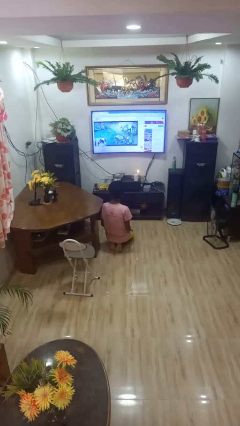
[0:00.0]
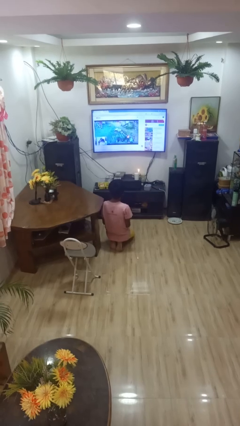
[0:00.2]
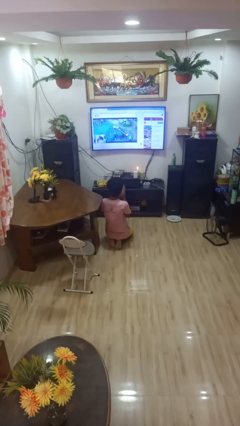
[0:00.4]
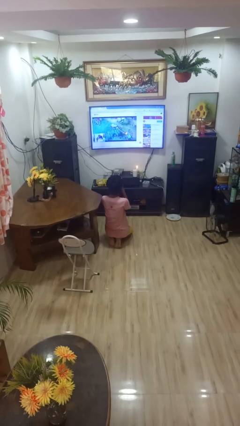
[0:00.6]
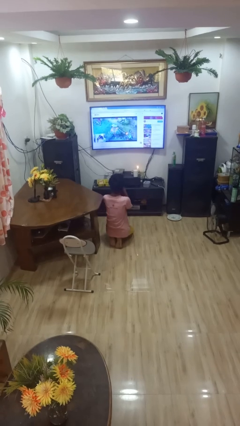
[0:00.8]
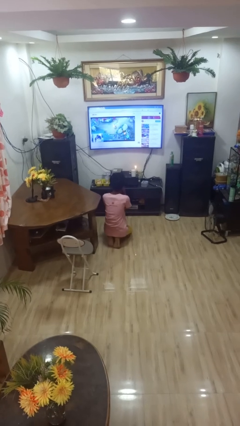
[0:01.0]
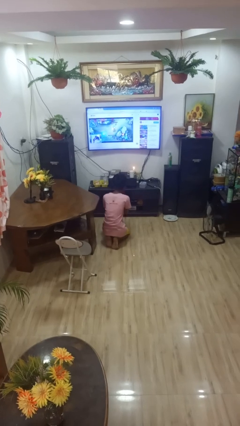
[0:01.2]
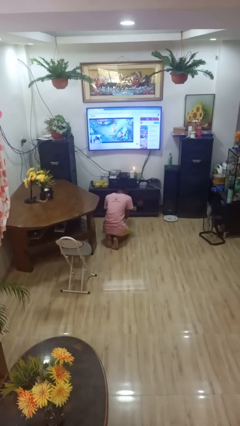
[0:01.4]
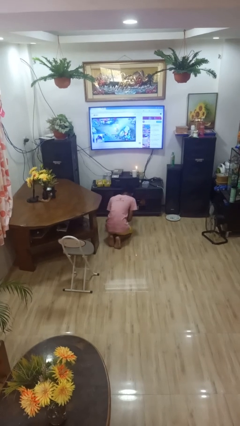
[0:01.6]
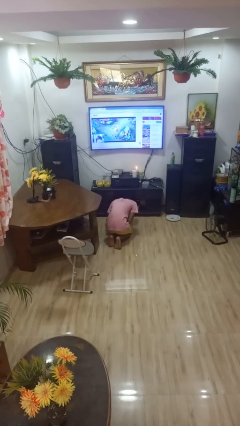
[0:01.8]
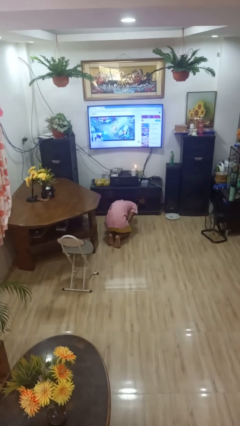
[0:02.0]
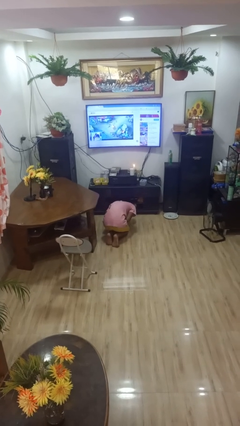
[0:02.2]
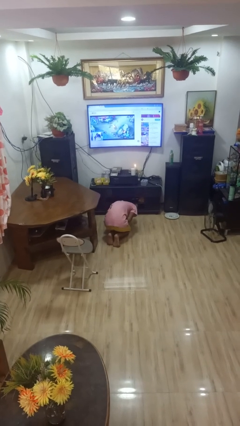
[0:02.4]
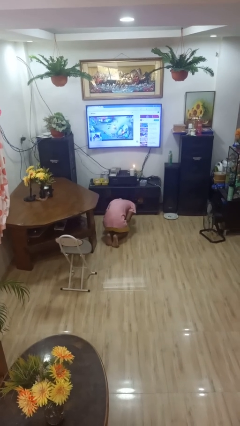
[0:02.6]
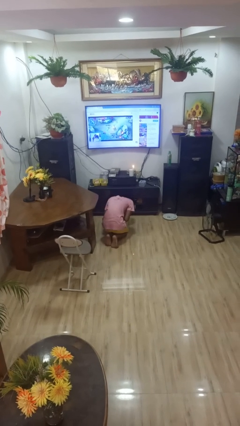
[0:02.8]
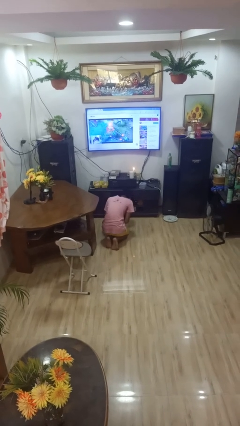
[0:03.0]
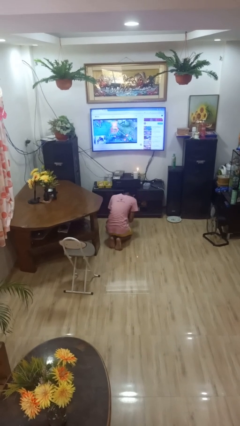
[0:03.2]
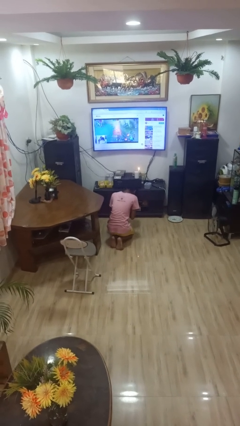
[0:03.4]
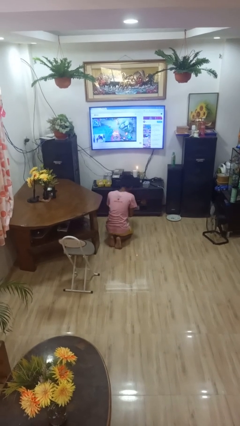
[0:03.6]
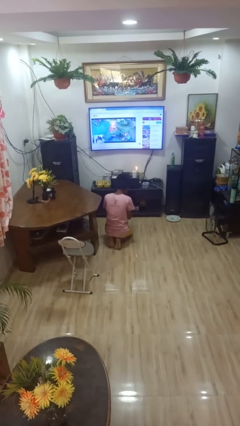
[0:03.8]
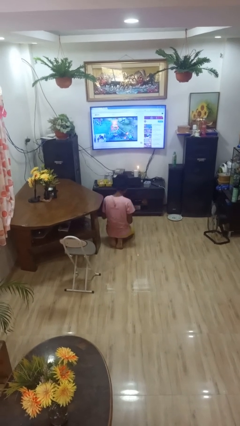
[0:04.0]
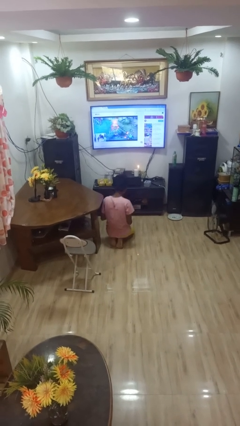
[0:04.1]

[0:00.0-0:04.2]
person prays

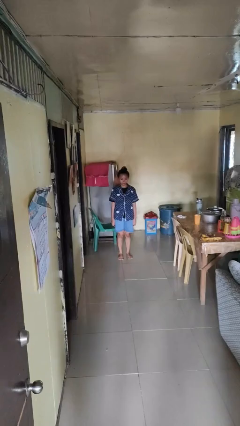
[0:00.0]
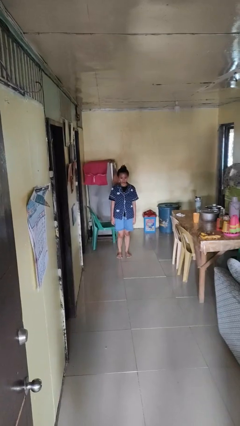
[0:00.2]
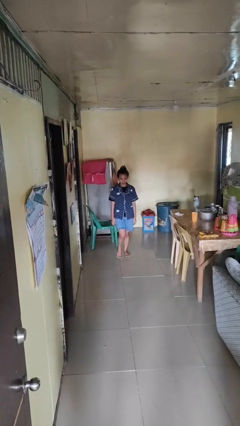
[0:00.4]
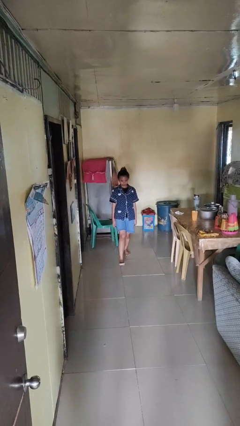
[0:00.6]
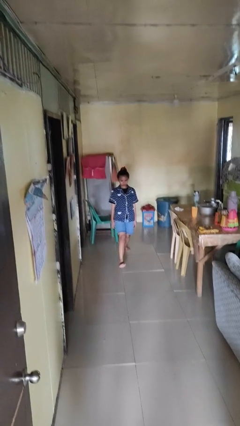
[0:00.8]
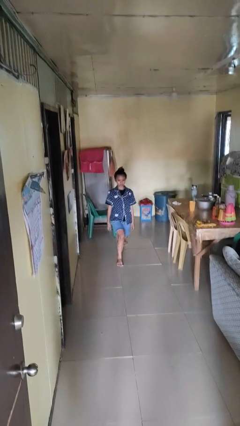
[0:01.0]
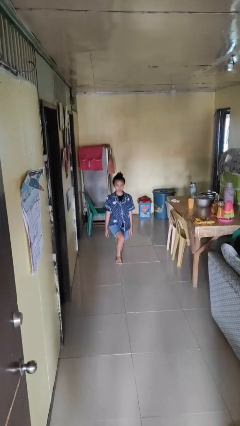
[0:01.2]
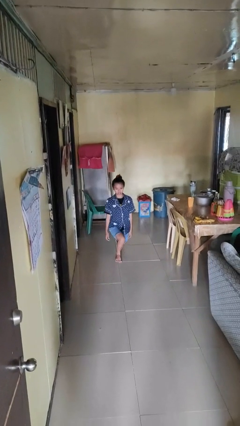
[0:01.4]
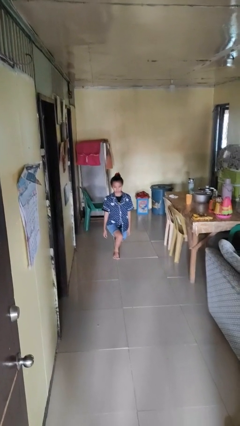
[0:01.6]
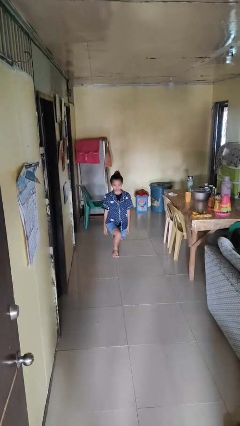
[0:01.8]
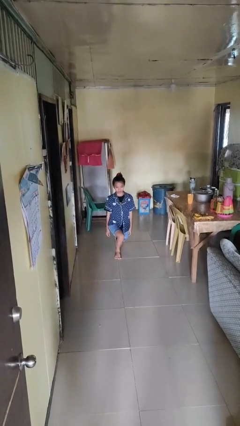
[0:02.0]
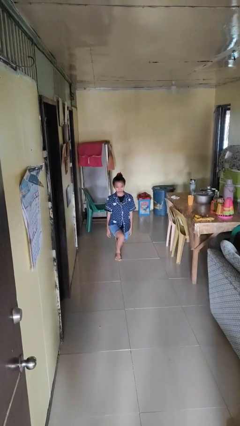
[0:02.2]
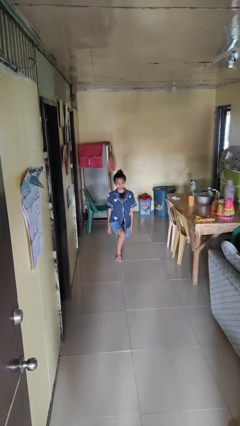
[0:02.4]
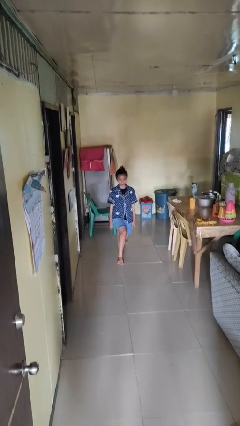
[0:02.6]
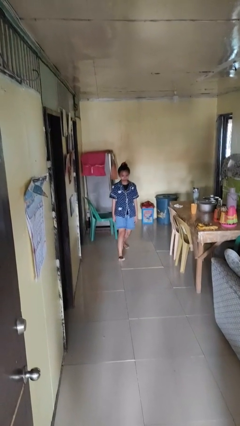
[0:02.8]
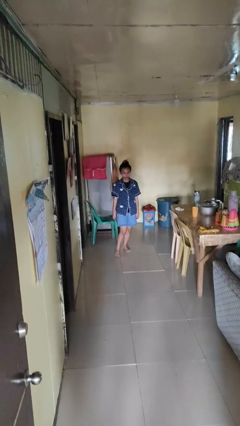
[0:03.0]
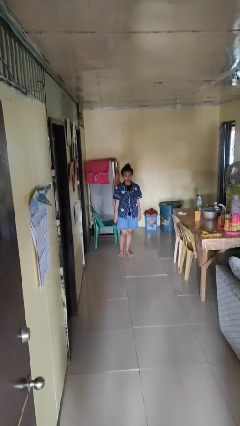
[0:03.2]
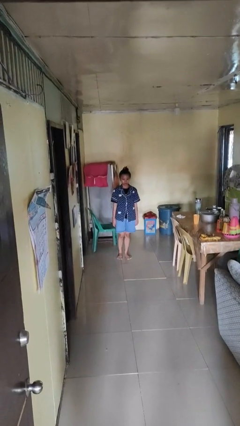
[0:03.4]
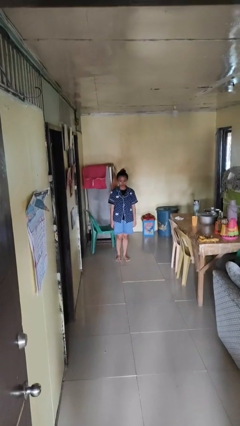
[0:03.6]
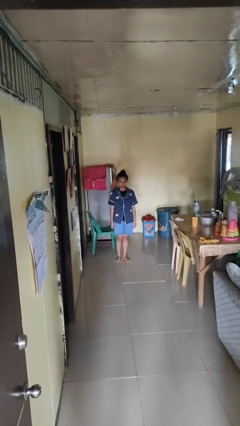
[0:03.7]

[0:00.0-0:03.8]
person exercises with lunges

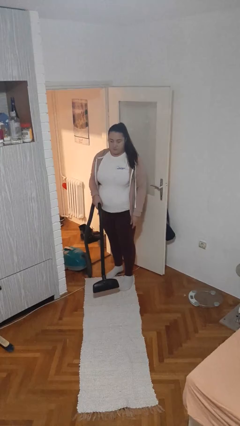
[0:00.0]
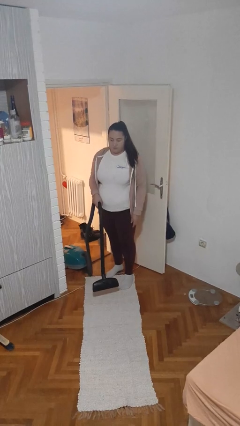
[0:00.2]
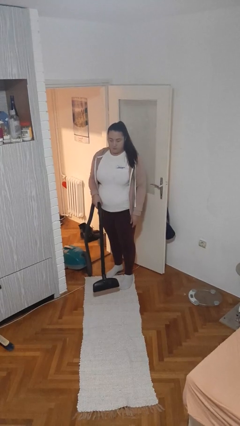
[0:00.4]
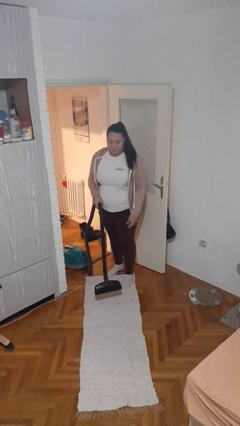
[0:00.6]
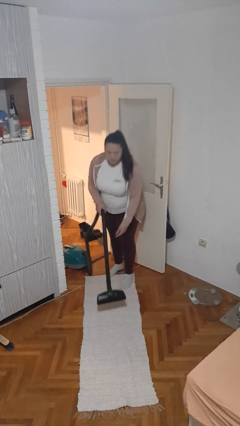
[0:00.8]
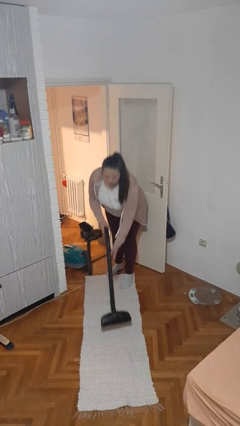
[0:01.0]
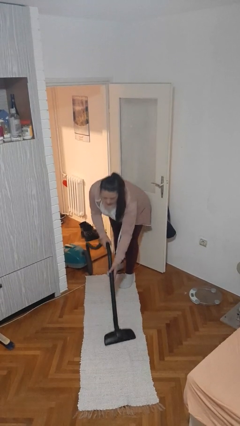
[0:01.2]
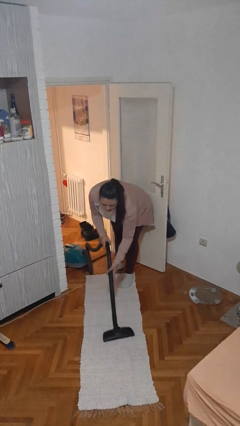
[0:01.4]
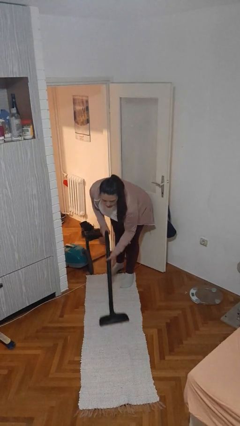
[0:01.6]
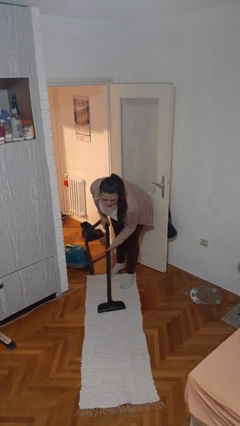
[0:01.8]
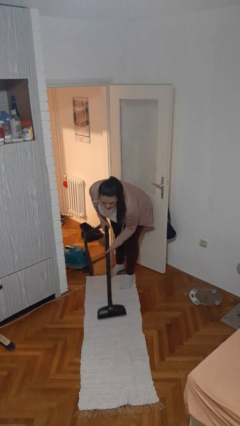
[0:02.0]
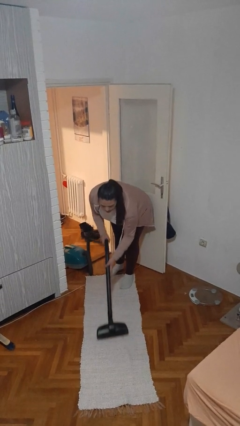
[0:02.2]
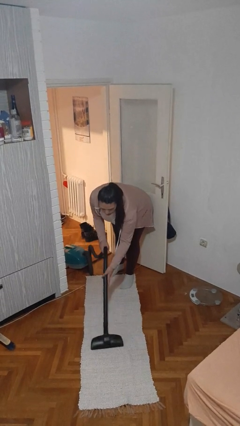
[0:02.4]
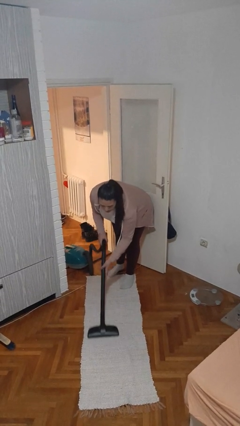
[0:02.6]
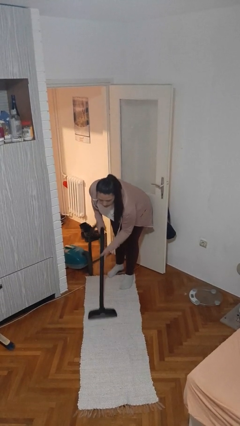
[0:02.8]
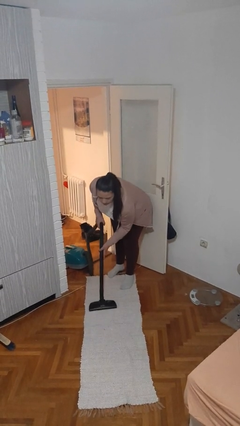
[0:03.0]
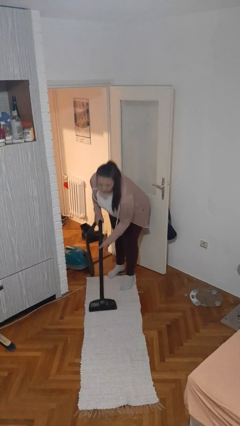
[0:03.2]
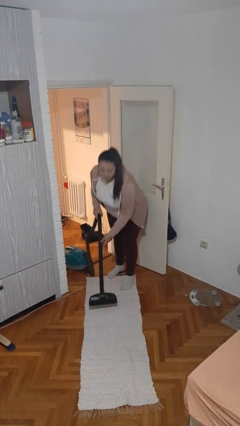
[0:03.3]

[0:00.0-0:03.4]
person vacuums carpet

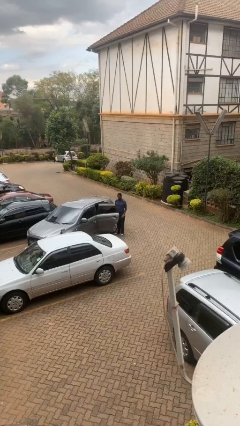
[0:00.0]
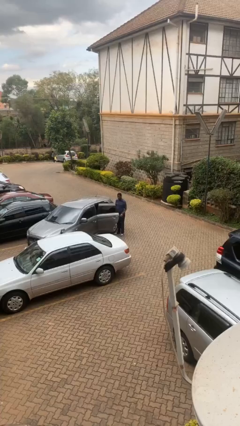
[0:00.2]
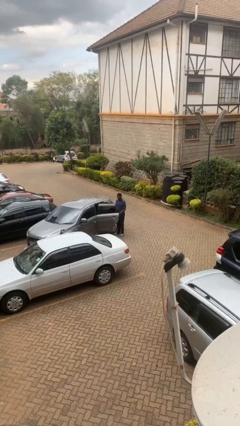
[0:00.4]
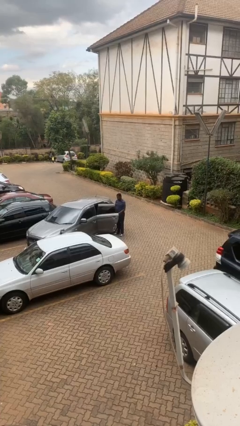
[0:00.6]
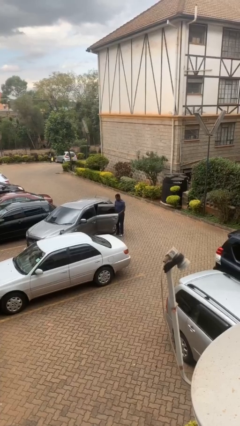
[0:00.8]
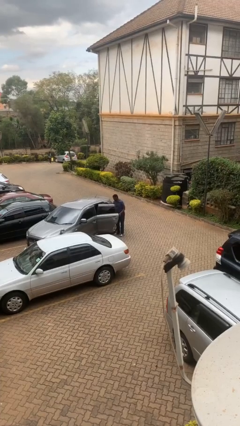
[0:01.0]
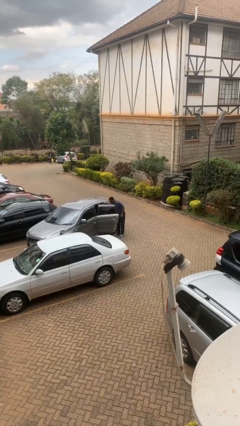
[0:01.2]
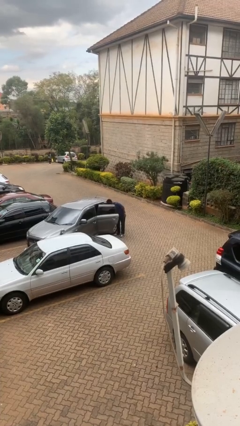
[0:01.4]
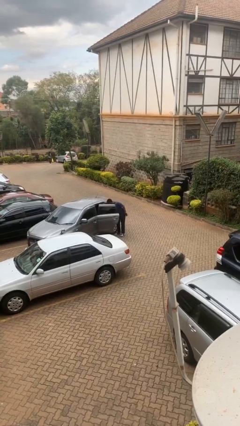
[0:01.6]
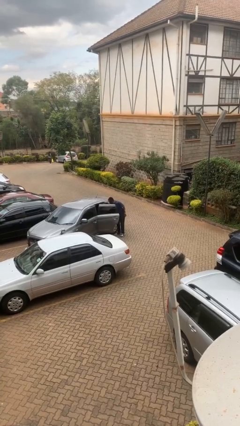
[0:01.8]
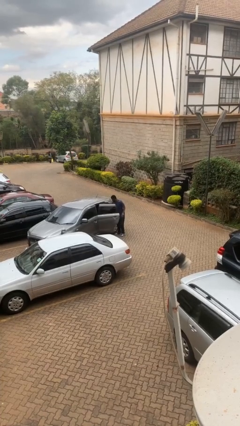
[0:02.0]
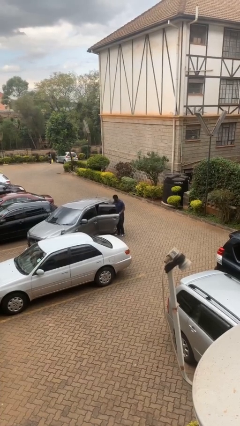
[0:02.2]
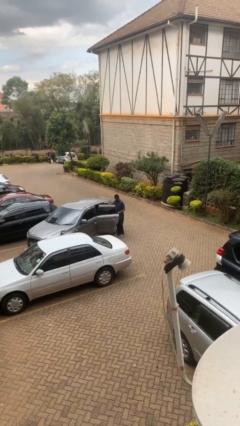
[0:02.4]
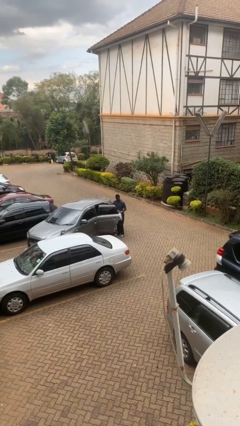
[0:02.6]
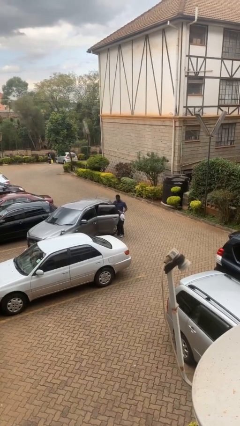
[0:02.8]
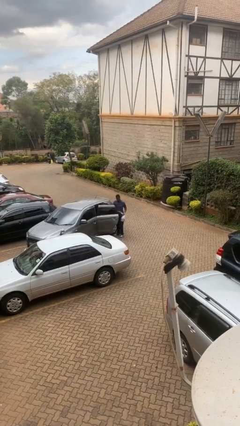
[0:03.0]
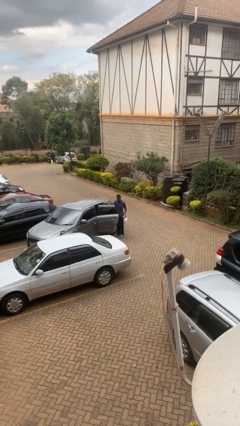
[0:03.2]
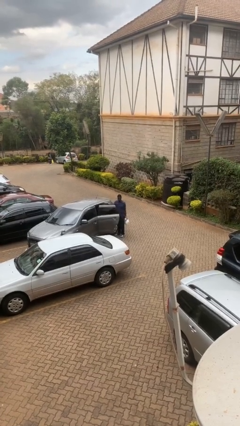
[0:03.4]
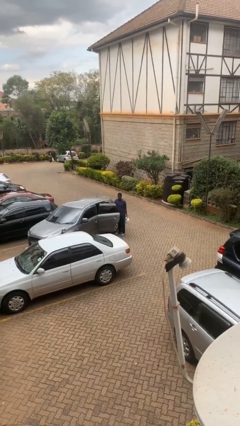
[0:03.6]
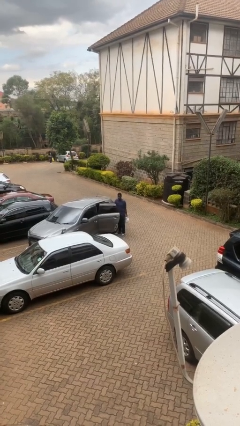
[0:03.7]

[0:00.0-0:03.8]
person unloads car

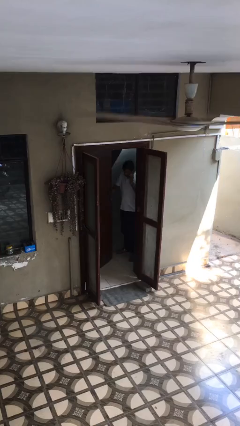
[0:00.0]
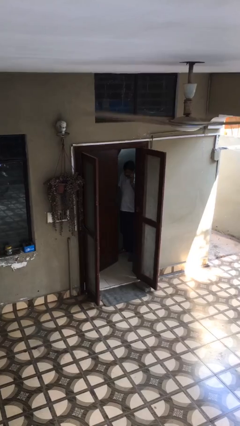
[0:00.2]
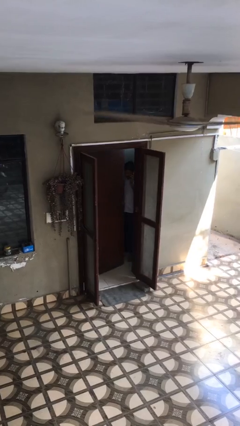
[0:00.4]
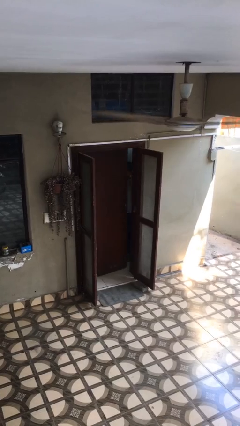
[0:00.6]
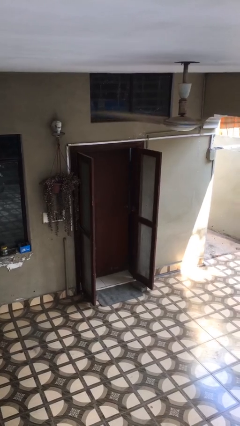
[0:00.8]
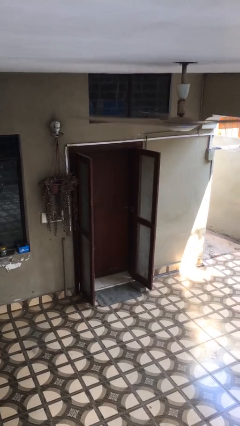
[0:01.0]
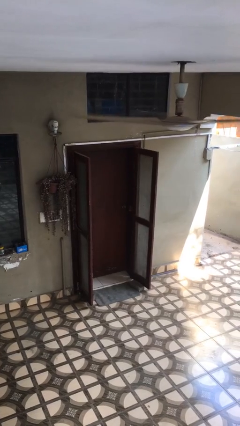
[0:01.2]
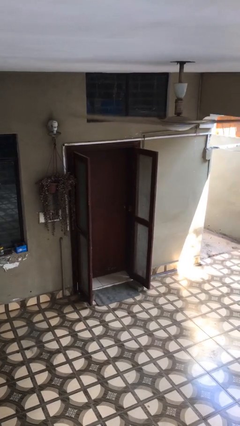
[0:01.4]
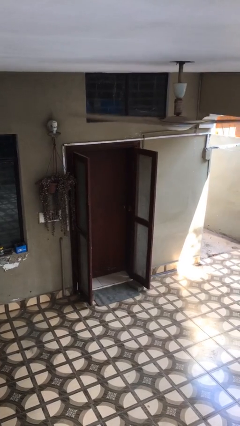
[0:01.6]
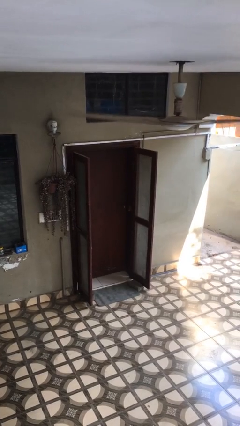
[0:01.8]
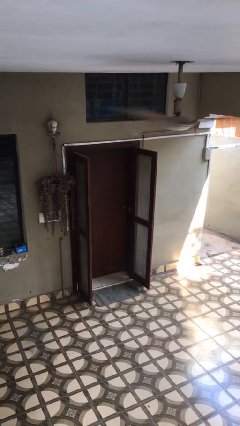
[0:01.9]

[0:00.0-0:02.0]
person closes facility door

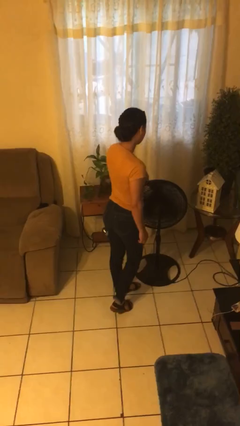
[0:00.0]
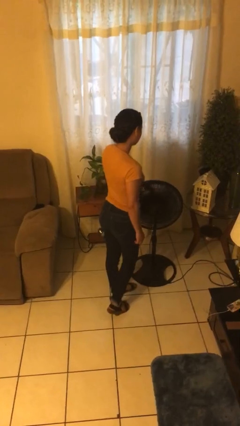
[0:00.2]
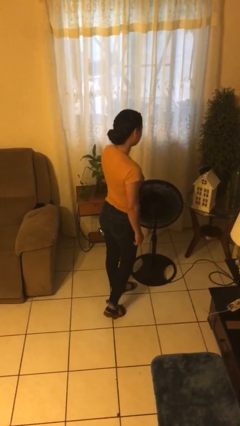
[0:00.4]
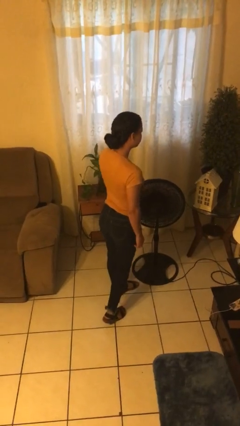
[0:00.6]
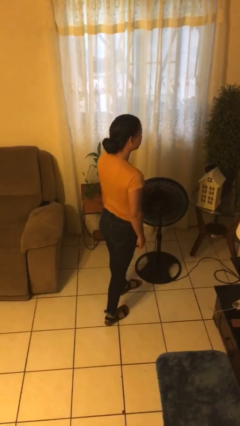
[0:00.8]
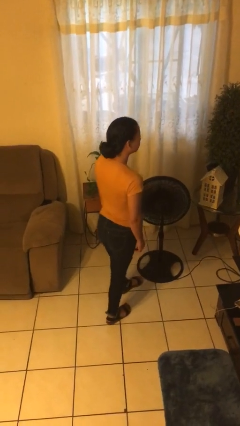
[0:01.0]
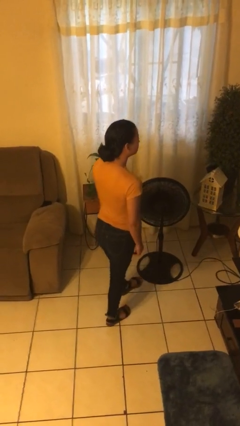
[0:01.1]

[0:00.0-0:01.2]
person turns on fan
